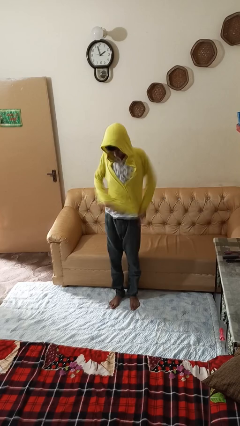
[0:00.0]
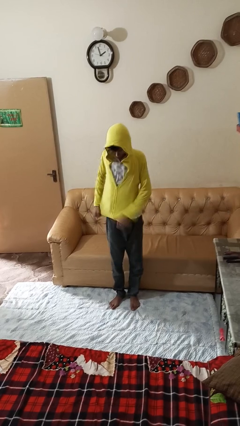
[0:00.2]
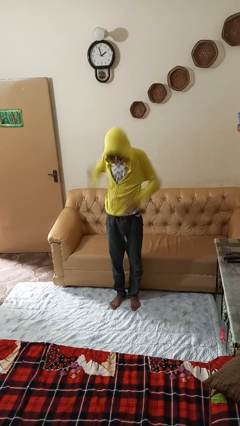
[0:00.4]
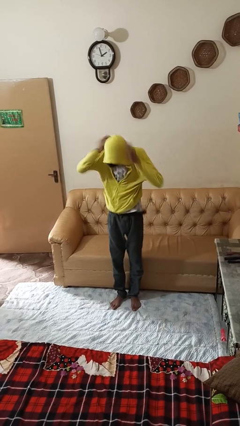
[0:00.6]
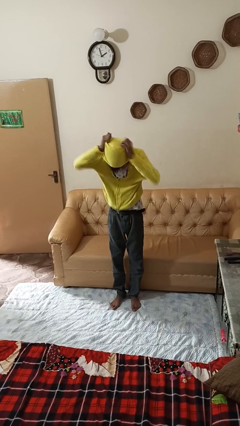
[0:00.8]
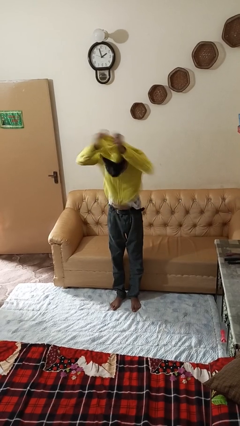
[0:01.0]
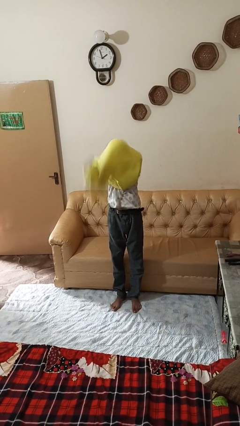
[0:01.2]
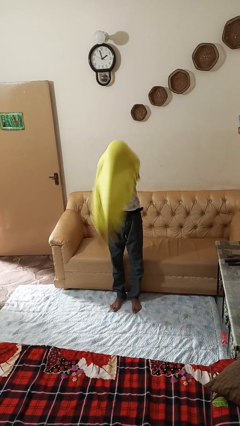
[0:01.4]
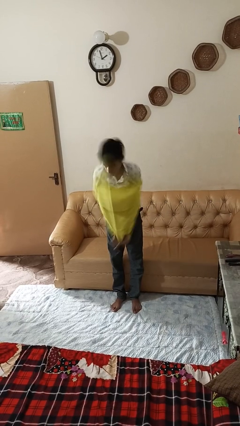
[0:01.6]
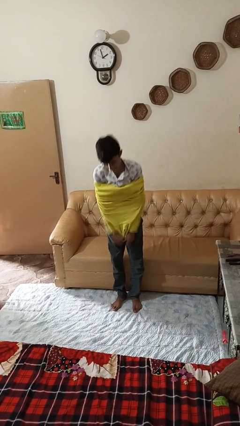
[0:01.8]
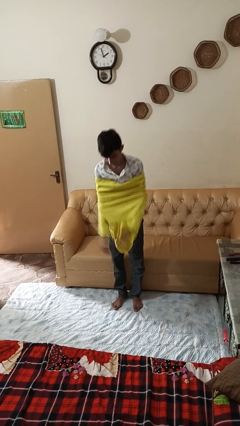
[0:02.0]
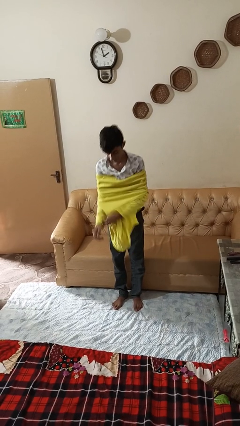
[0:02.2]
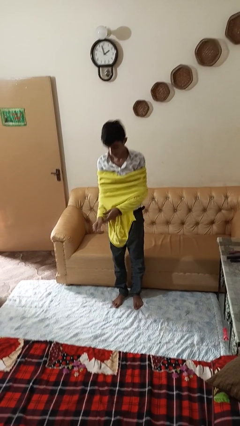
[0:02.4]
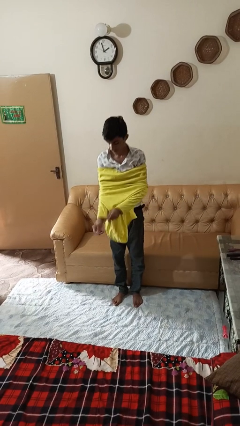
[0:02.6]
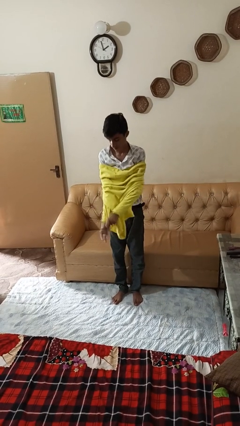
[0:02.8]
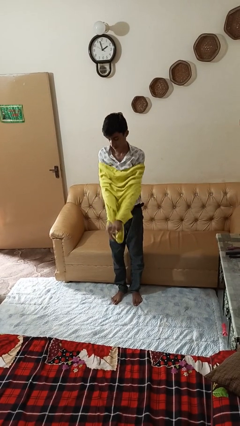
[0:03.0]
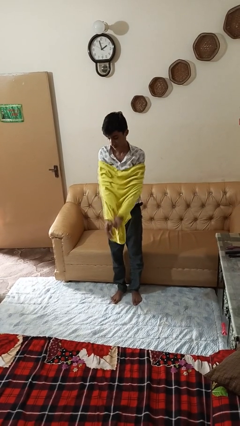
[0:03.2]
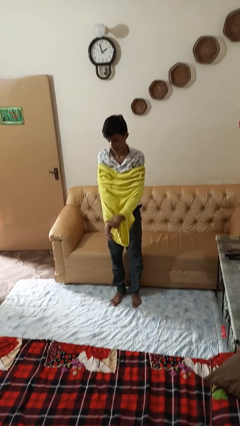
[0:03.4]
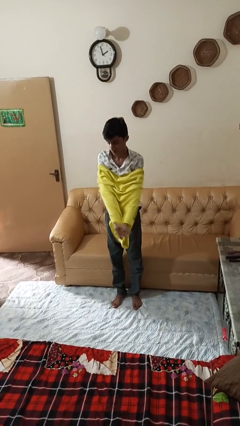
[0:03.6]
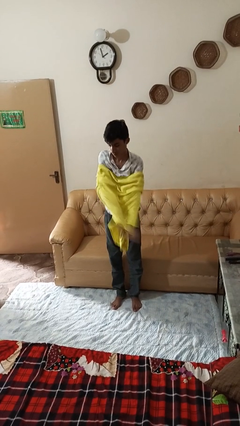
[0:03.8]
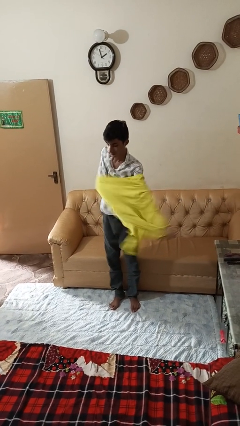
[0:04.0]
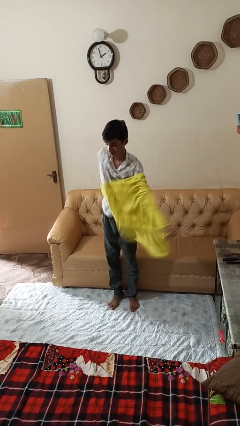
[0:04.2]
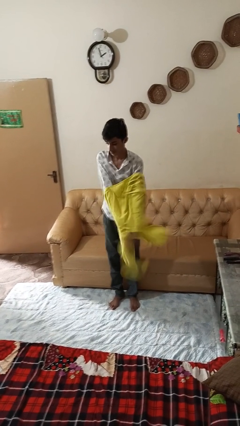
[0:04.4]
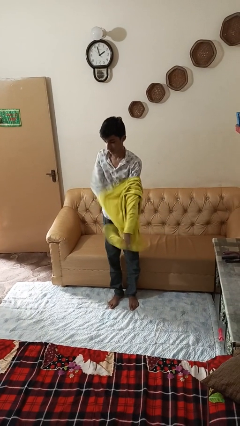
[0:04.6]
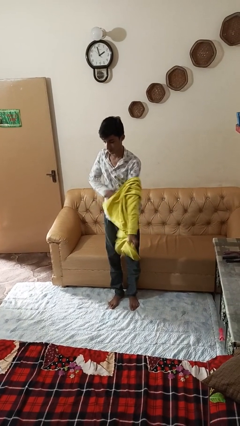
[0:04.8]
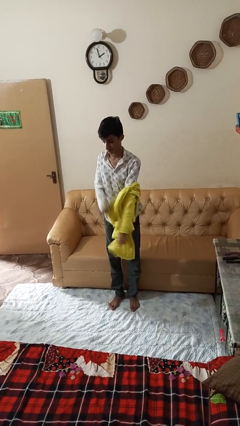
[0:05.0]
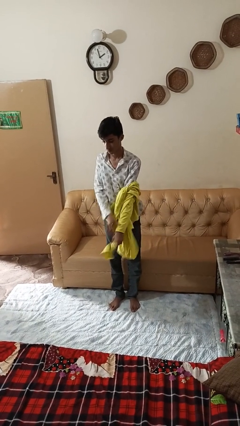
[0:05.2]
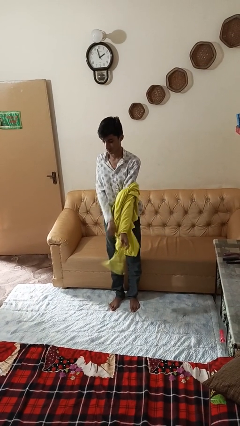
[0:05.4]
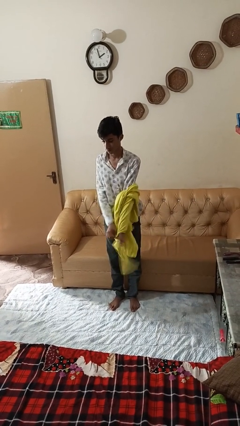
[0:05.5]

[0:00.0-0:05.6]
person takes off hoodie

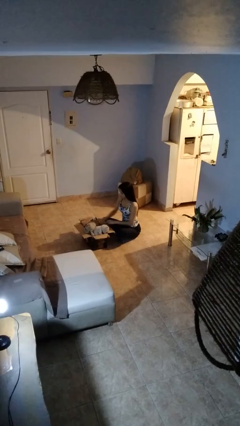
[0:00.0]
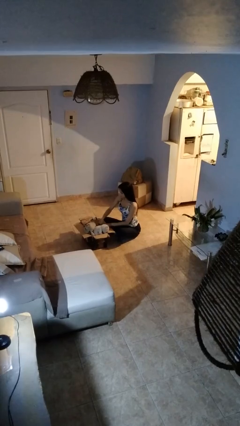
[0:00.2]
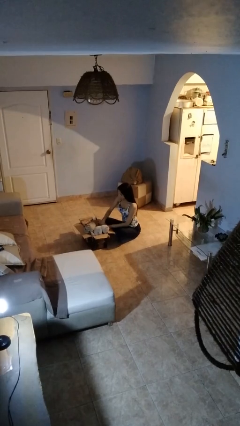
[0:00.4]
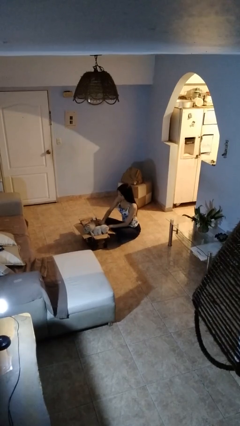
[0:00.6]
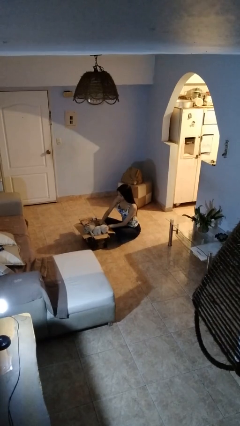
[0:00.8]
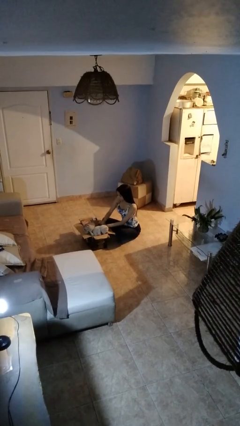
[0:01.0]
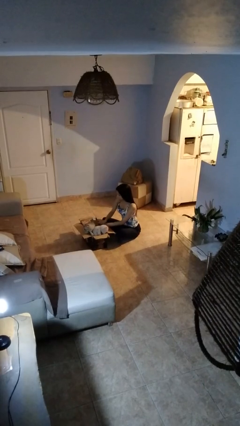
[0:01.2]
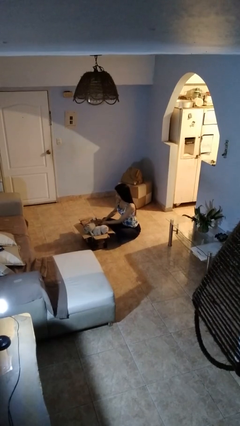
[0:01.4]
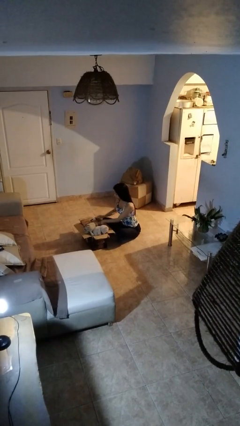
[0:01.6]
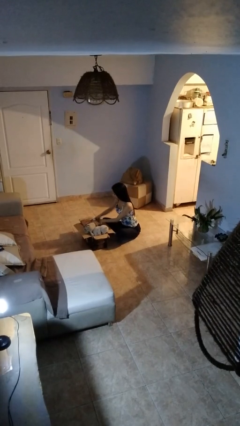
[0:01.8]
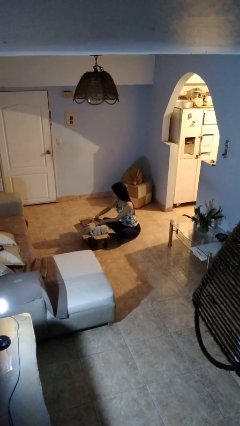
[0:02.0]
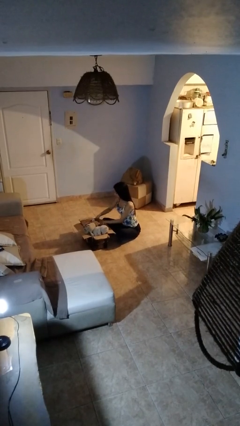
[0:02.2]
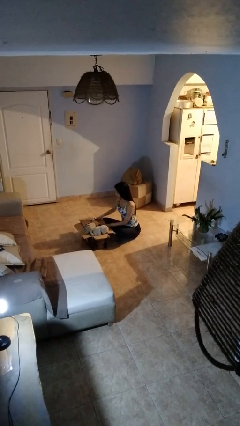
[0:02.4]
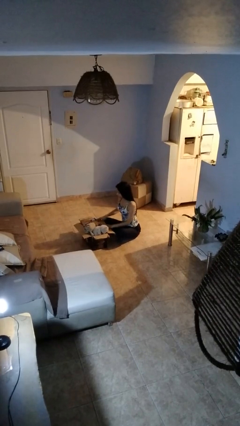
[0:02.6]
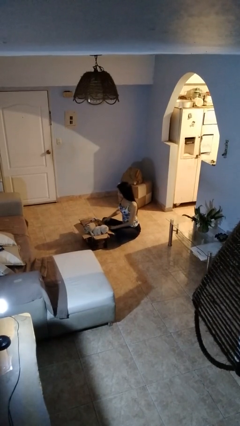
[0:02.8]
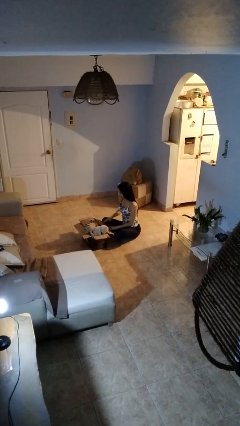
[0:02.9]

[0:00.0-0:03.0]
person searches in box

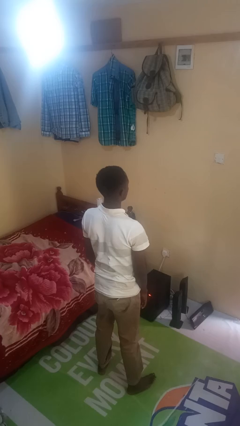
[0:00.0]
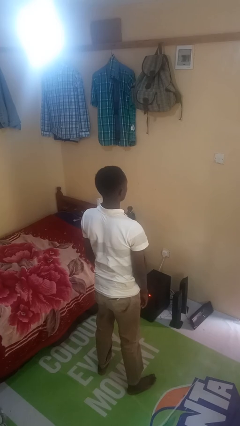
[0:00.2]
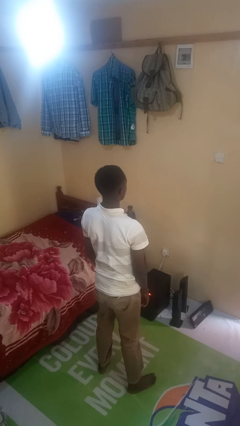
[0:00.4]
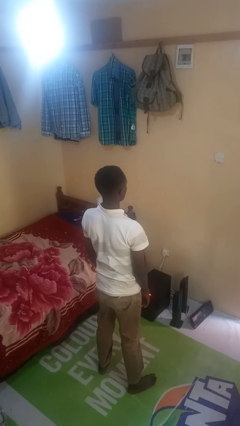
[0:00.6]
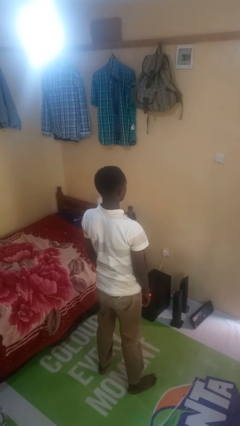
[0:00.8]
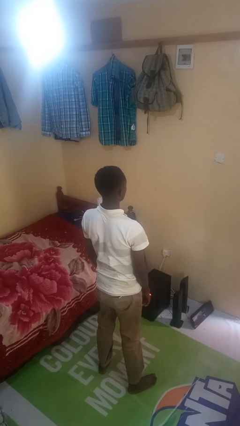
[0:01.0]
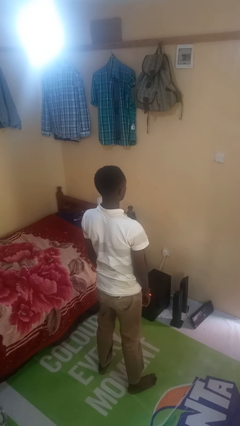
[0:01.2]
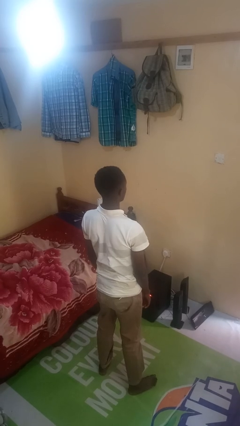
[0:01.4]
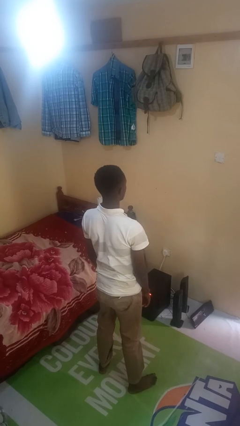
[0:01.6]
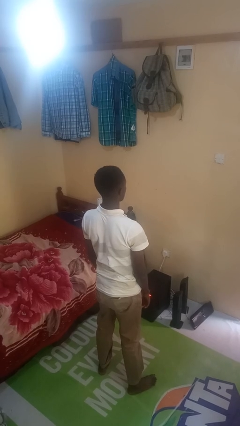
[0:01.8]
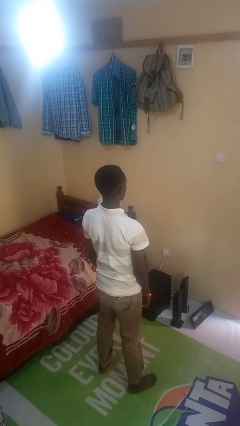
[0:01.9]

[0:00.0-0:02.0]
person stands up

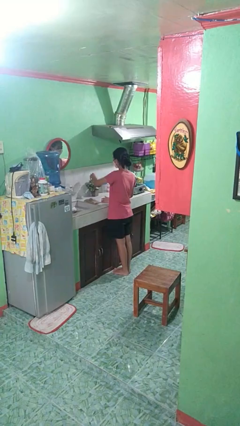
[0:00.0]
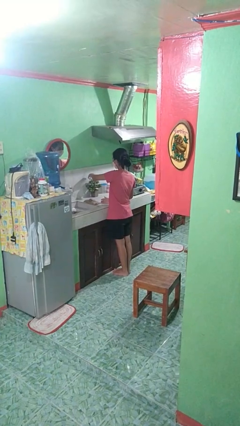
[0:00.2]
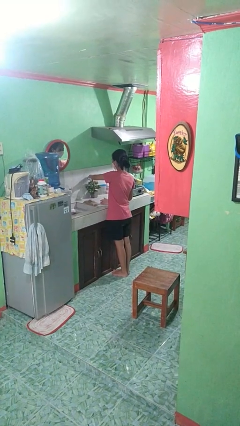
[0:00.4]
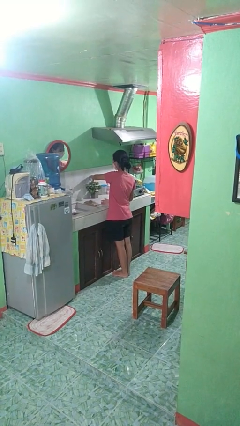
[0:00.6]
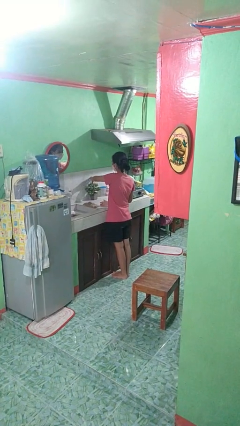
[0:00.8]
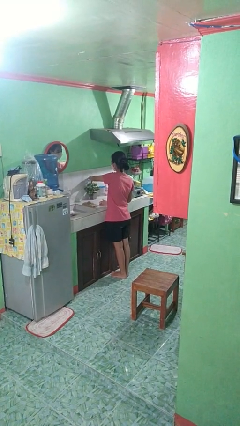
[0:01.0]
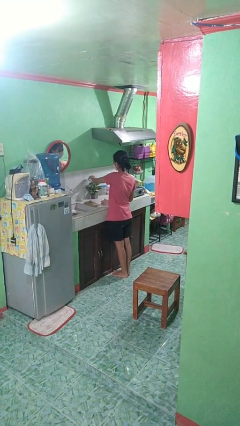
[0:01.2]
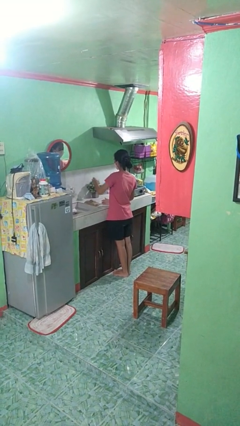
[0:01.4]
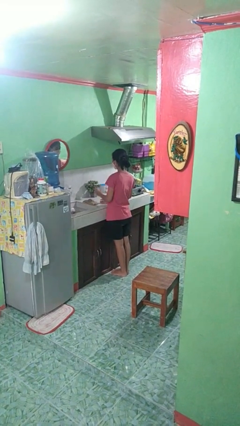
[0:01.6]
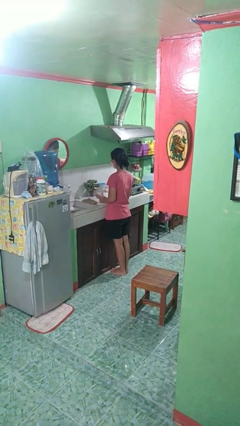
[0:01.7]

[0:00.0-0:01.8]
person waters houseplant

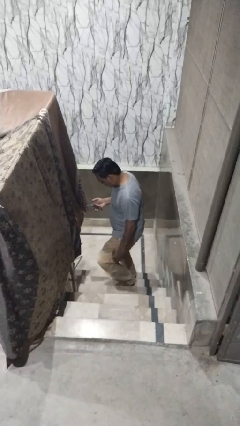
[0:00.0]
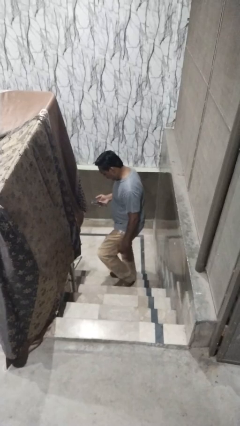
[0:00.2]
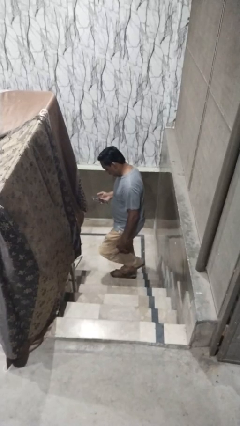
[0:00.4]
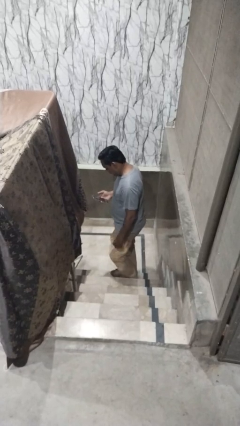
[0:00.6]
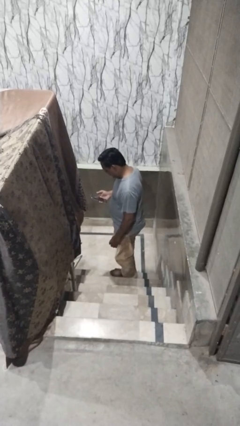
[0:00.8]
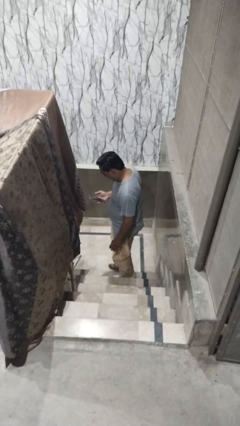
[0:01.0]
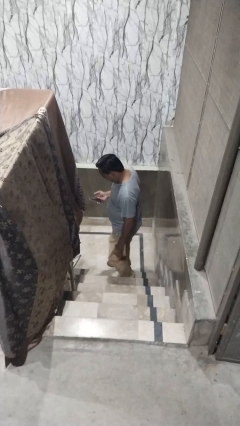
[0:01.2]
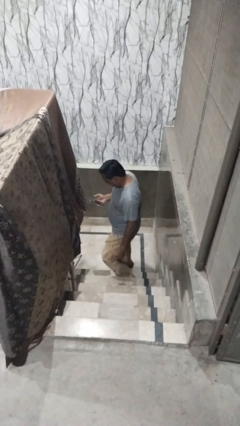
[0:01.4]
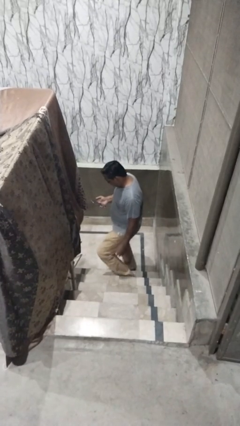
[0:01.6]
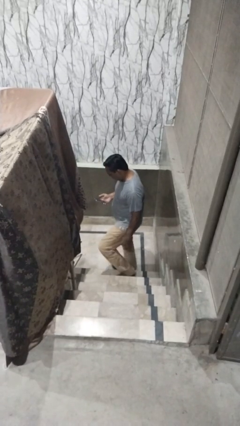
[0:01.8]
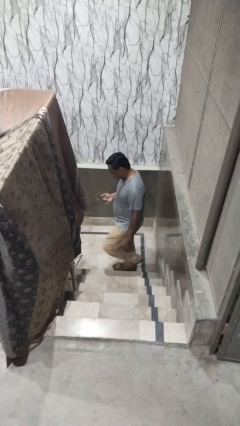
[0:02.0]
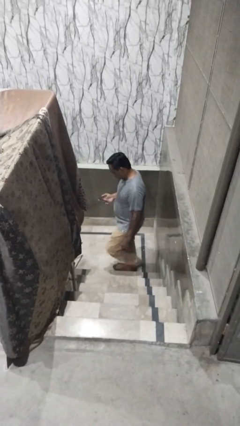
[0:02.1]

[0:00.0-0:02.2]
person climbs down stairs

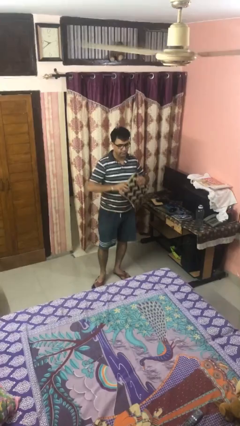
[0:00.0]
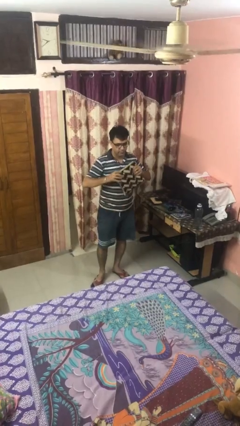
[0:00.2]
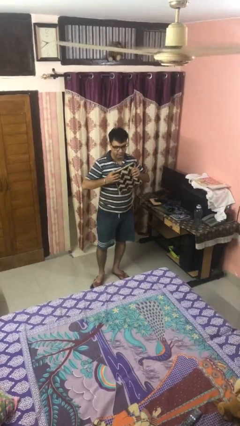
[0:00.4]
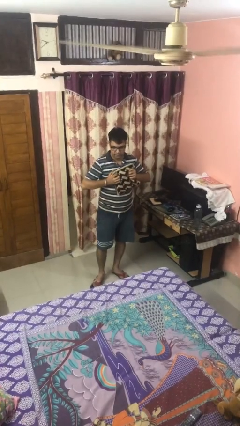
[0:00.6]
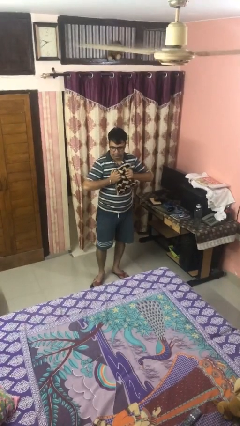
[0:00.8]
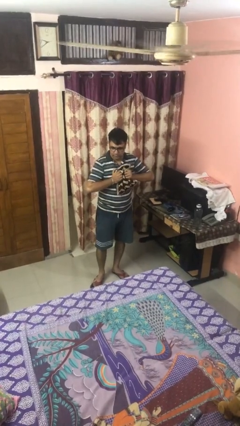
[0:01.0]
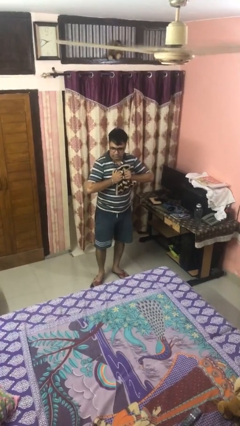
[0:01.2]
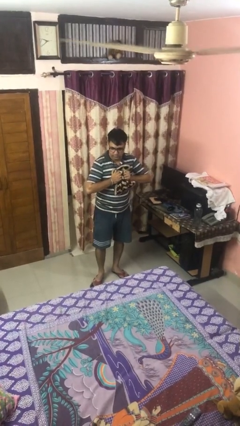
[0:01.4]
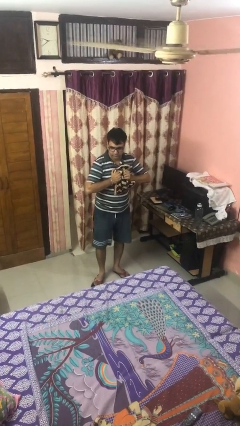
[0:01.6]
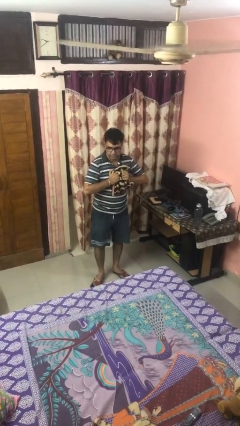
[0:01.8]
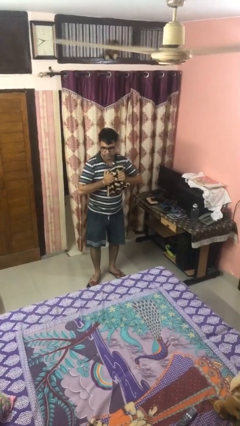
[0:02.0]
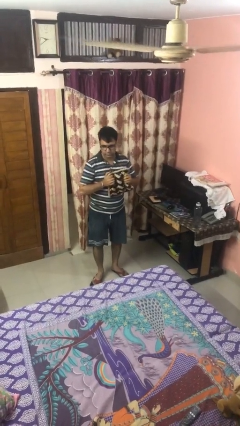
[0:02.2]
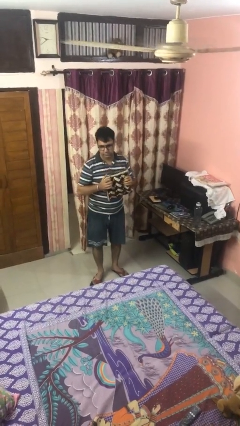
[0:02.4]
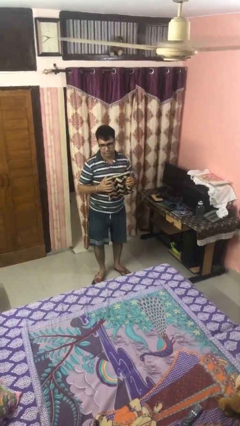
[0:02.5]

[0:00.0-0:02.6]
person squeezes object
